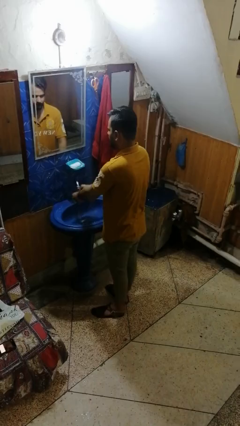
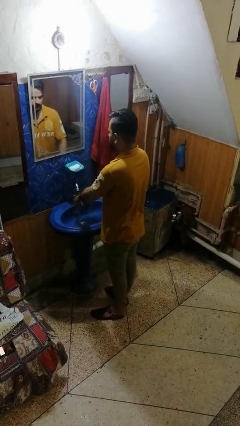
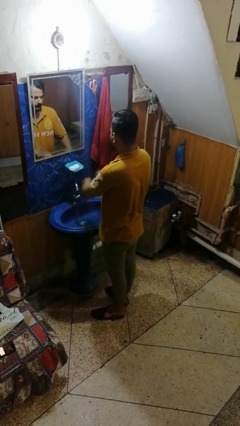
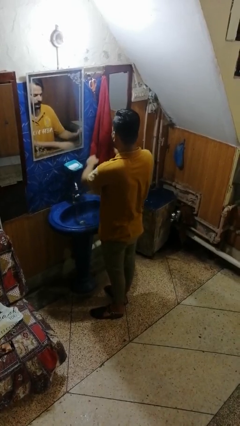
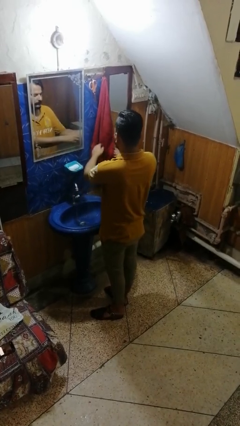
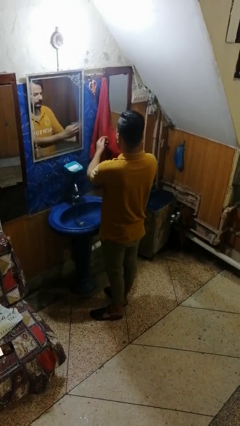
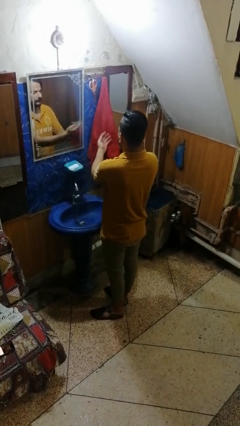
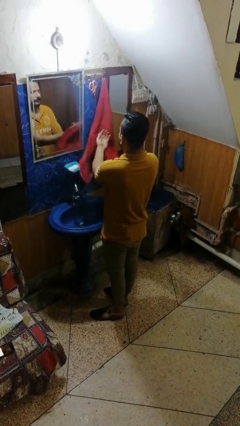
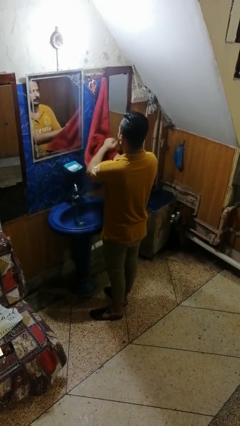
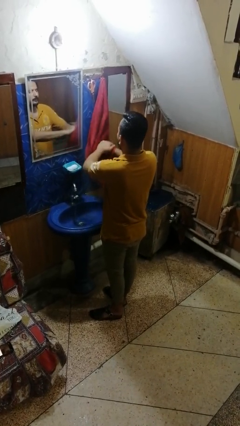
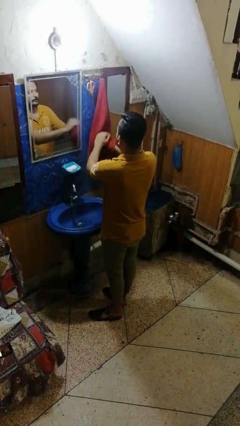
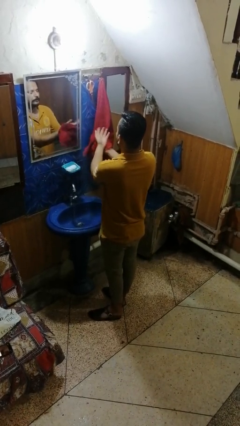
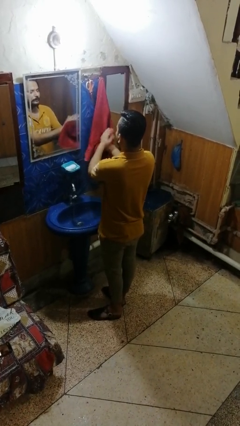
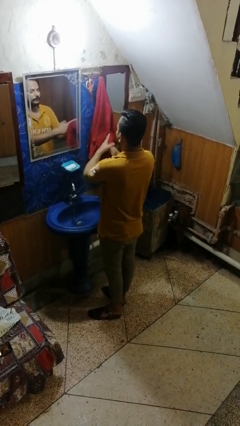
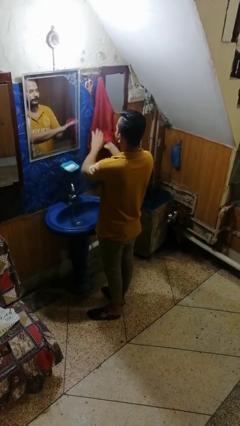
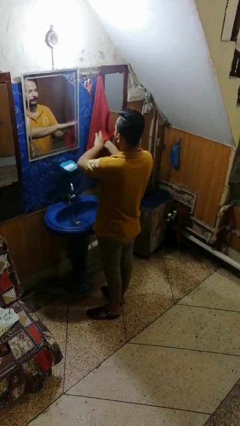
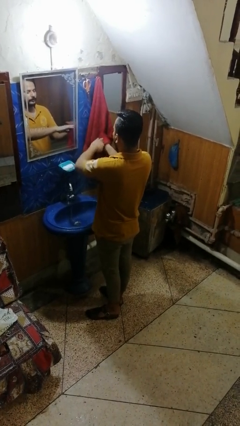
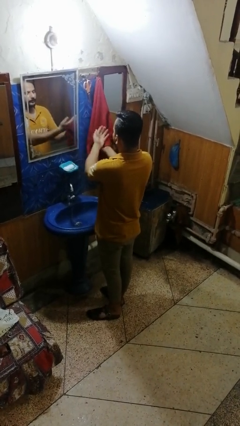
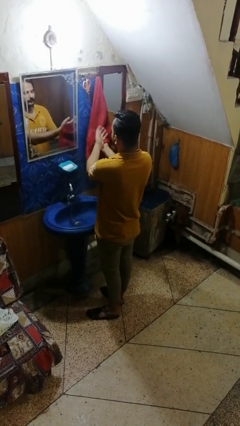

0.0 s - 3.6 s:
person dries hands with towel

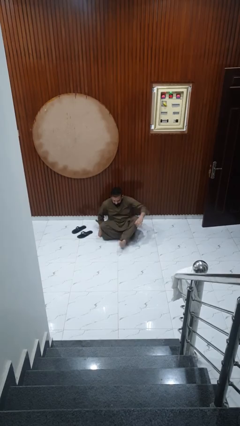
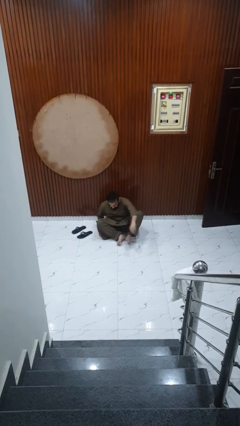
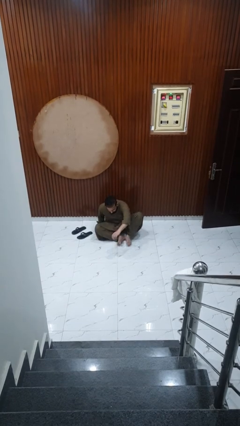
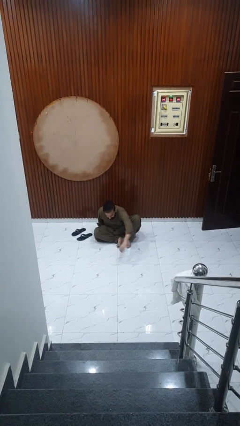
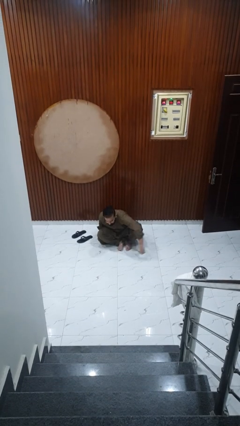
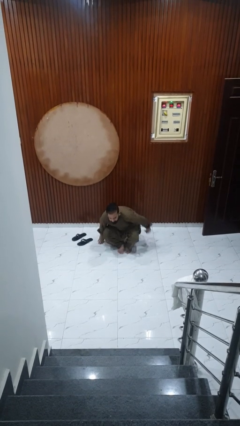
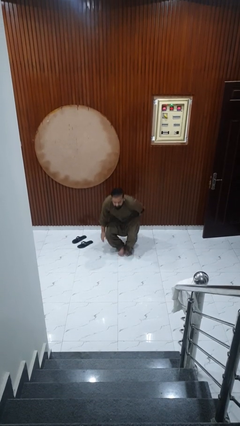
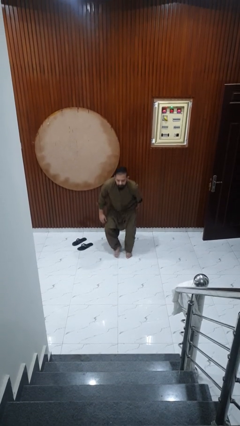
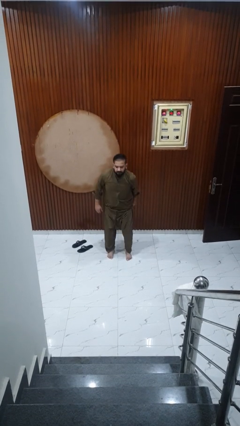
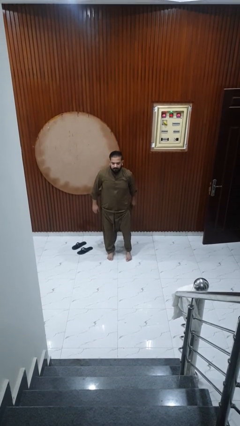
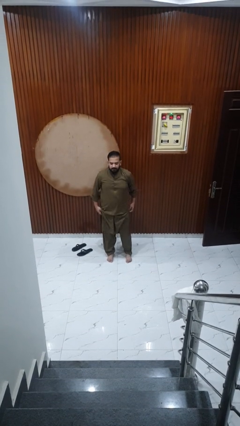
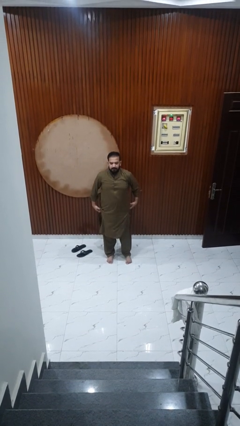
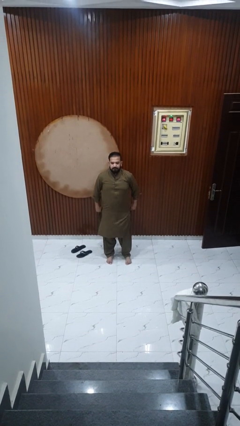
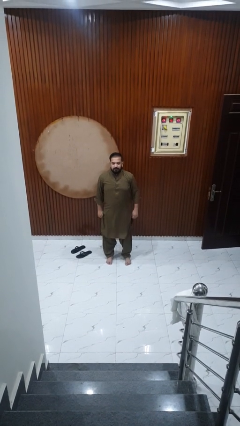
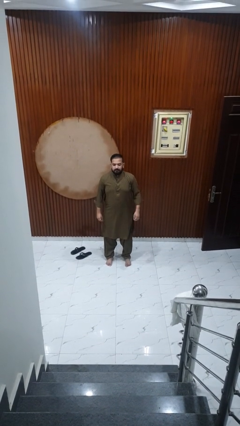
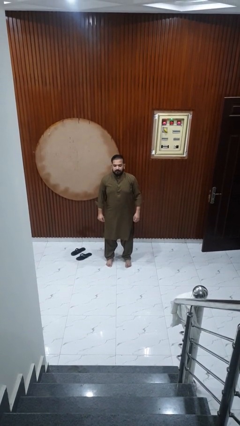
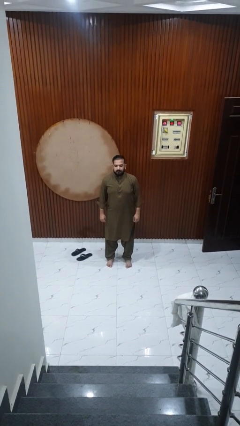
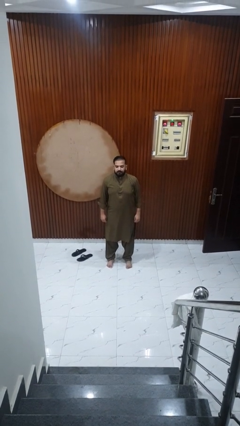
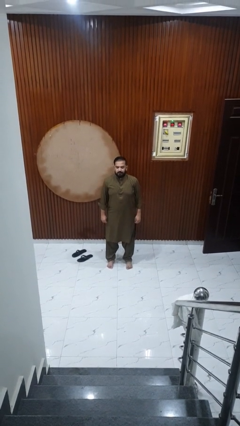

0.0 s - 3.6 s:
person stands up from floor

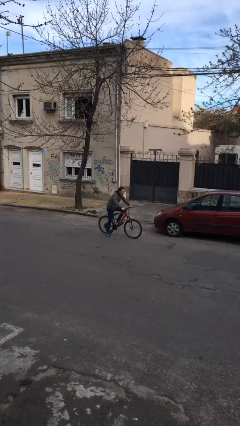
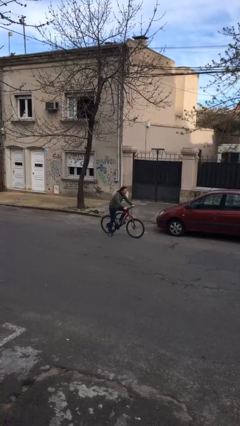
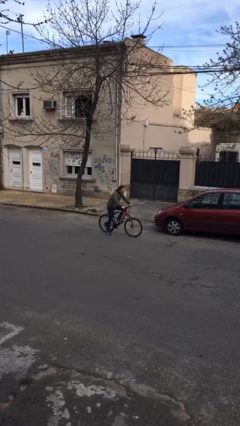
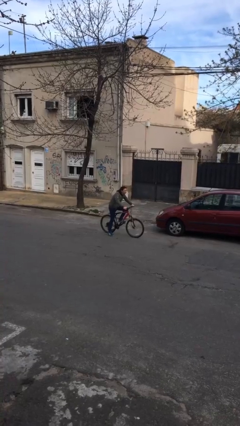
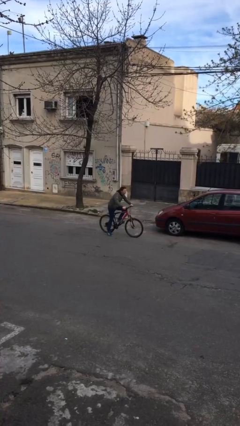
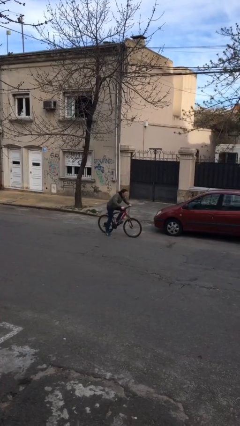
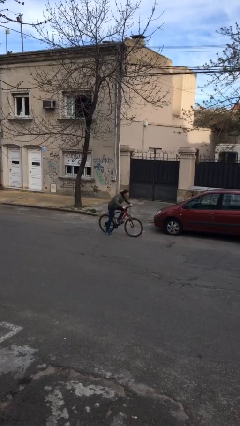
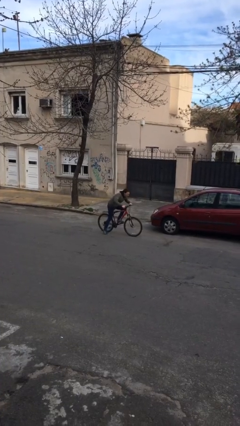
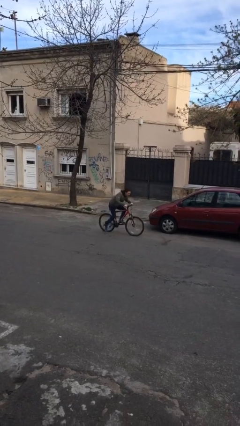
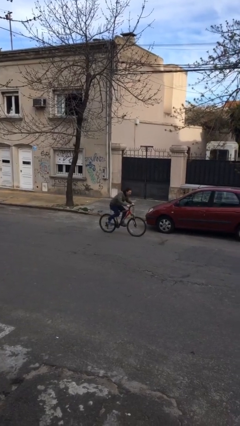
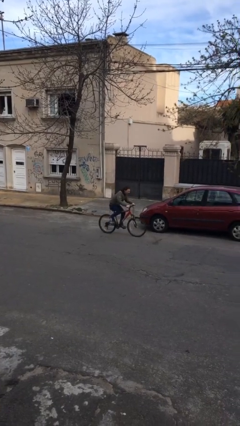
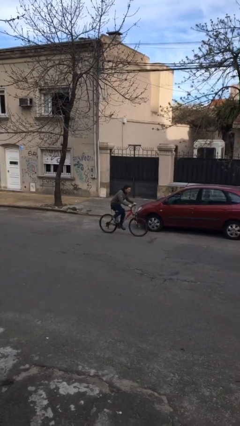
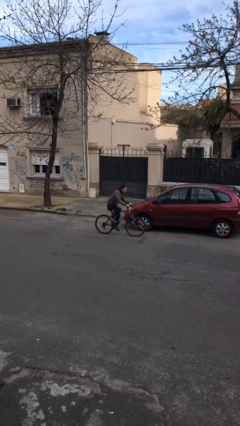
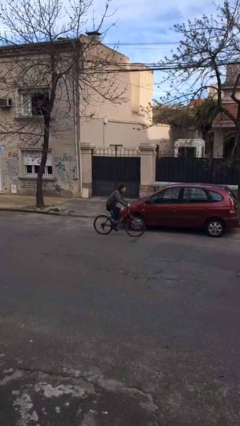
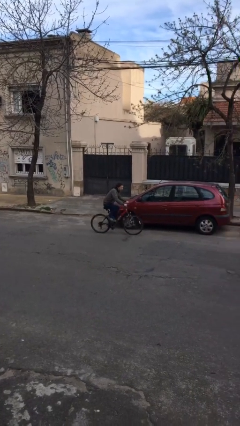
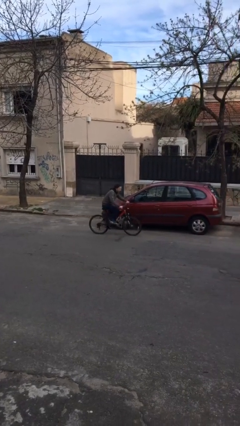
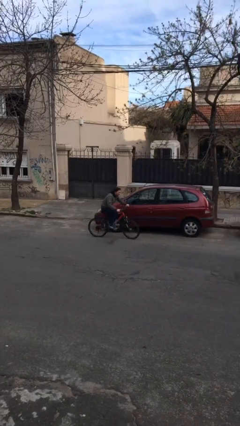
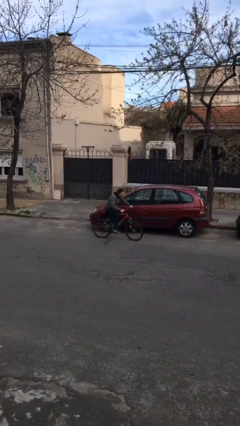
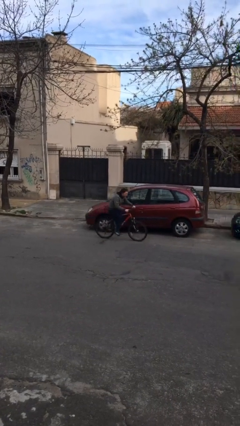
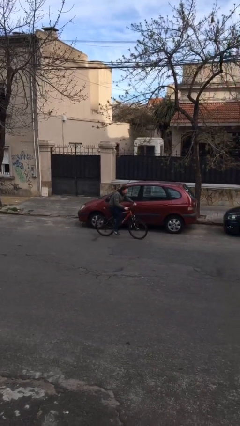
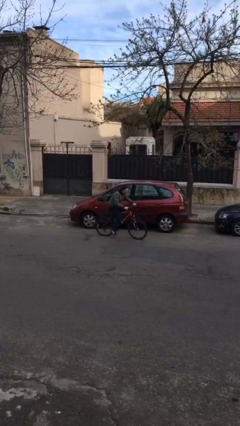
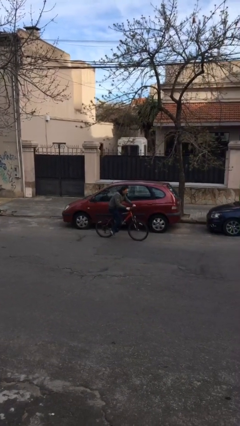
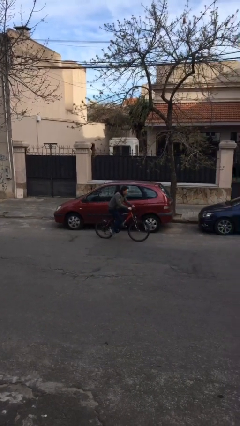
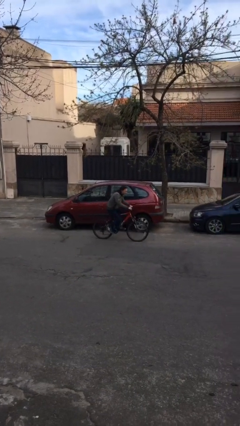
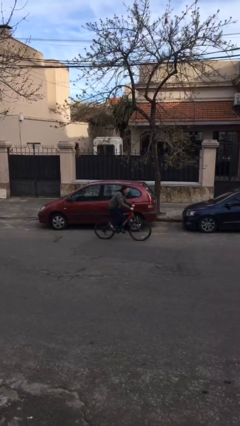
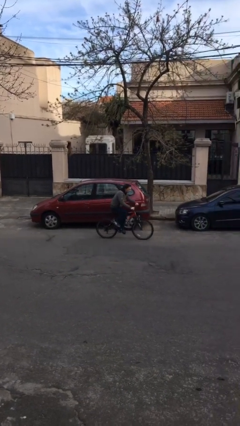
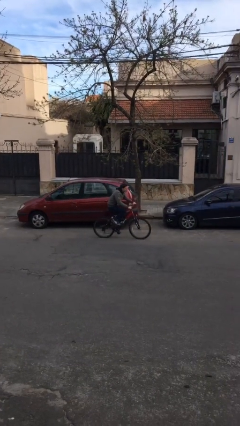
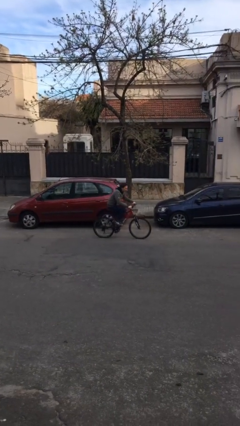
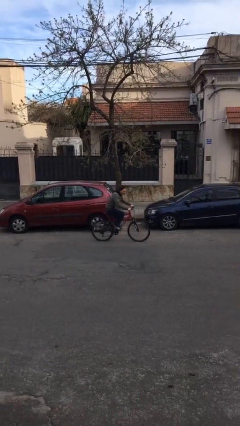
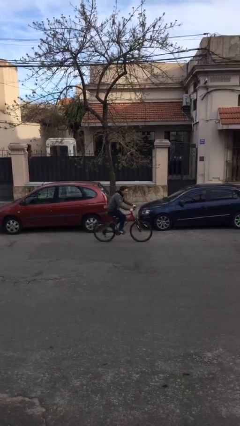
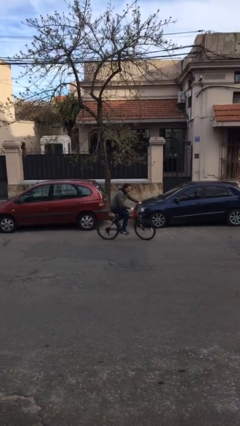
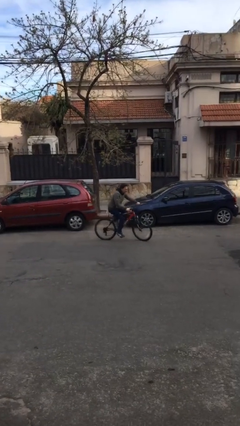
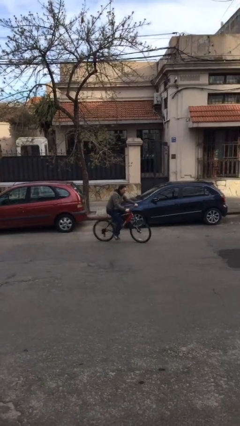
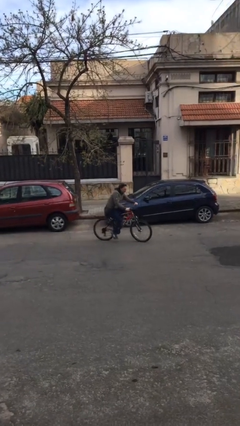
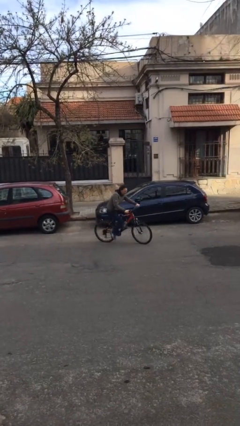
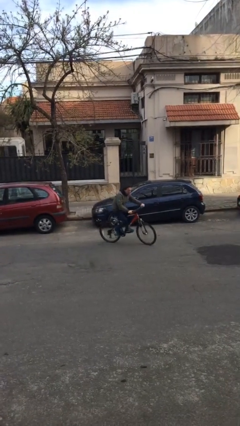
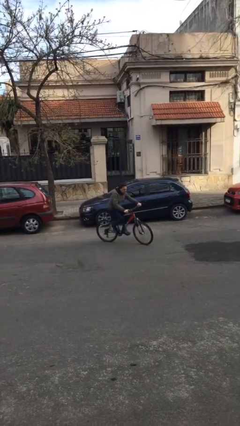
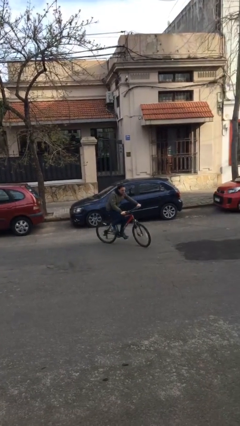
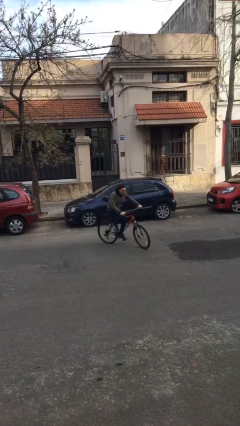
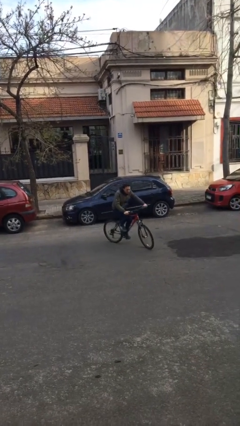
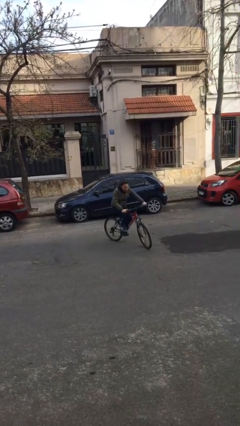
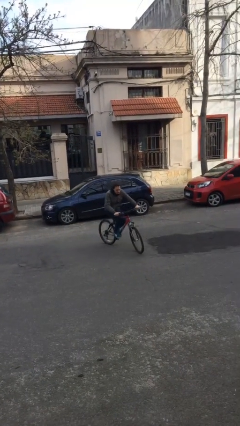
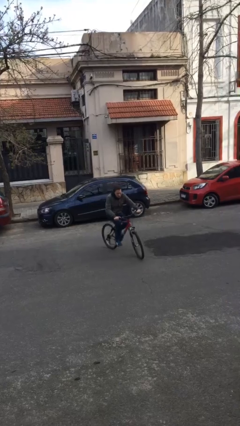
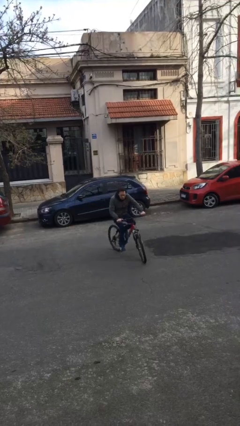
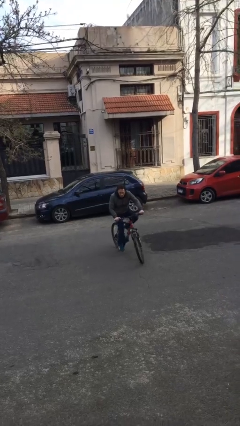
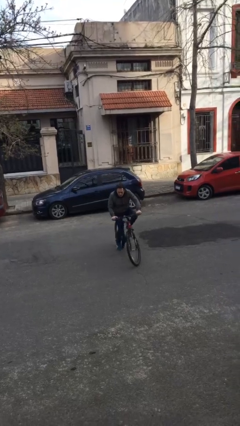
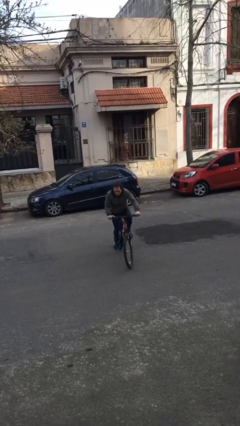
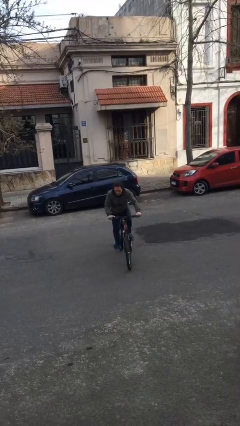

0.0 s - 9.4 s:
person rides bicycle

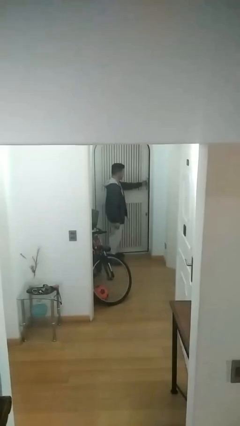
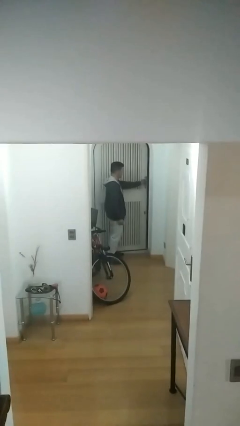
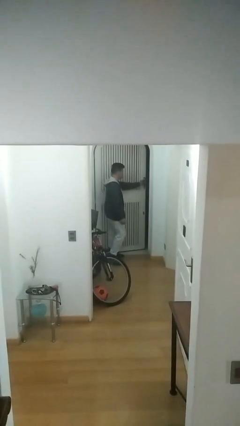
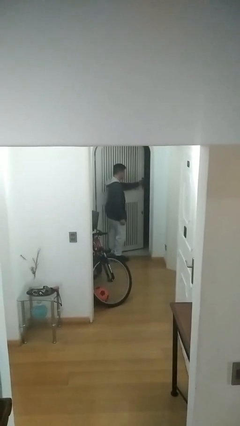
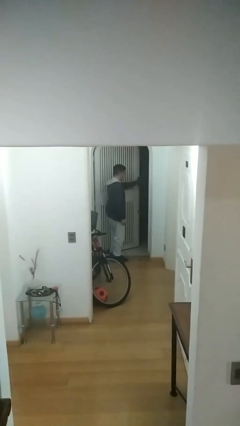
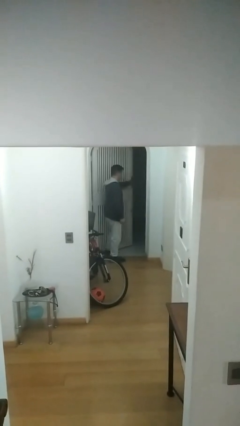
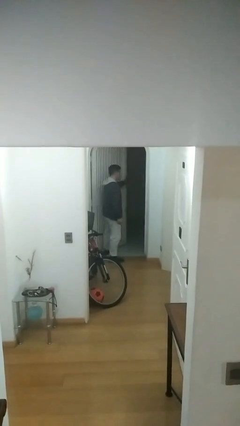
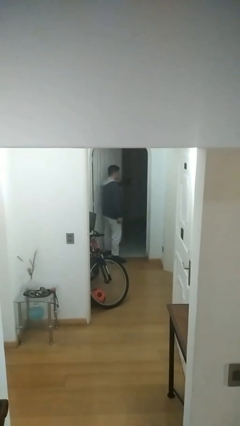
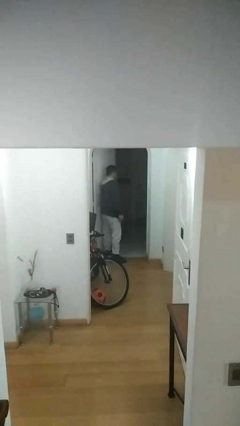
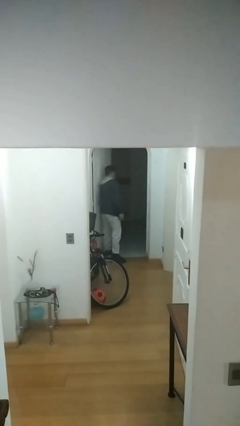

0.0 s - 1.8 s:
person opens facility door
